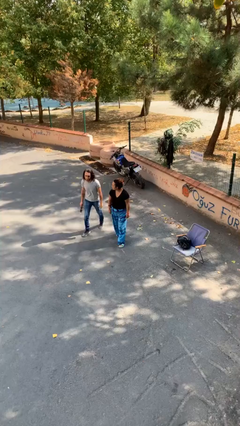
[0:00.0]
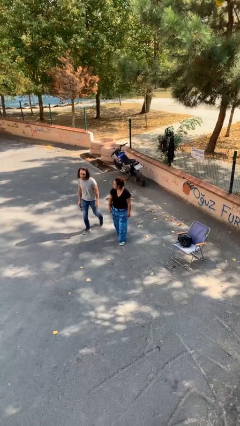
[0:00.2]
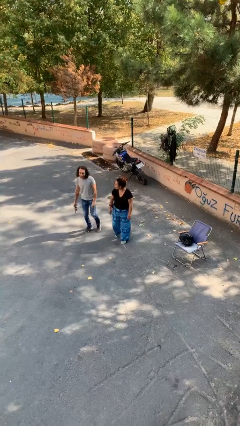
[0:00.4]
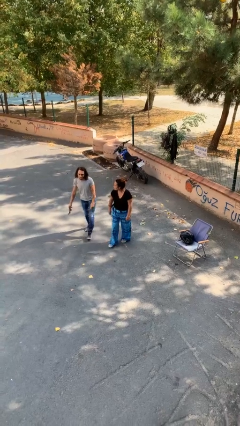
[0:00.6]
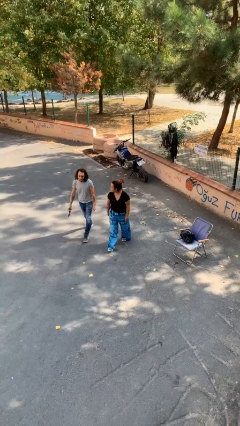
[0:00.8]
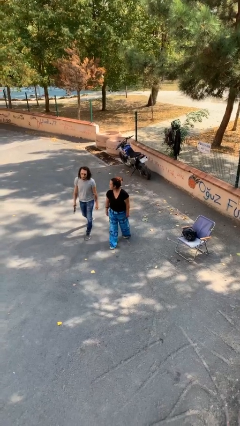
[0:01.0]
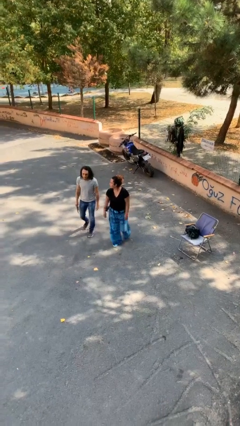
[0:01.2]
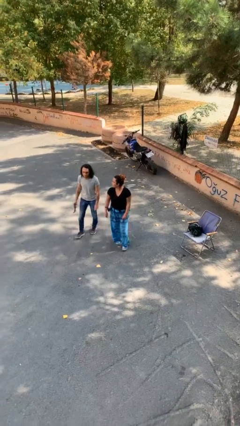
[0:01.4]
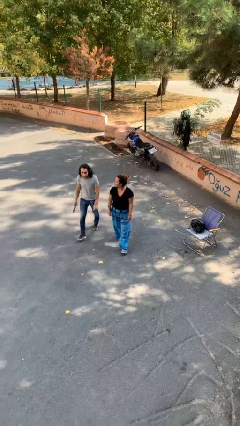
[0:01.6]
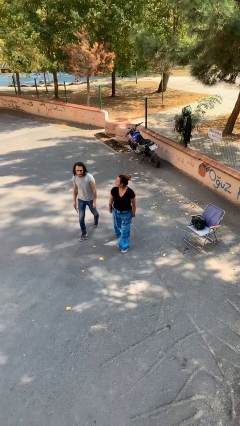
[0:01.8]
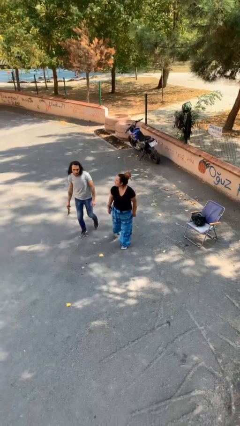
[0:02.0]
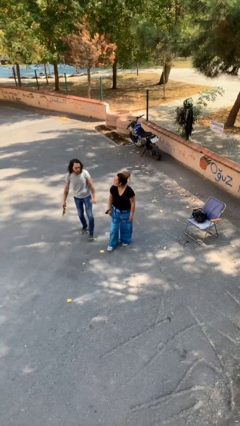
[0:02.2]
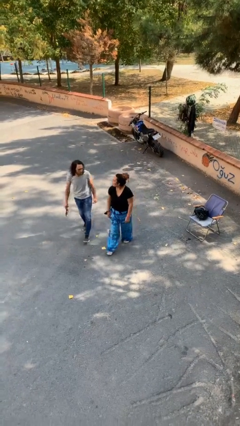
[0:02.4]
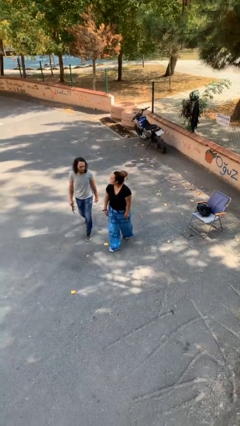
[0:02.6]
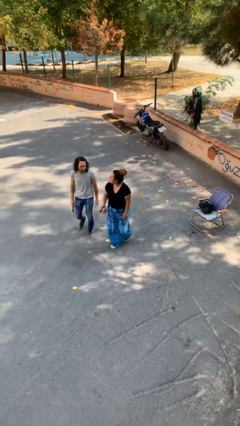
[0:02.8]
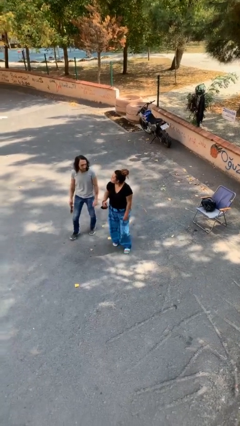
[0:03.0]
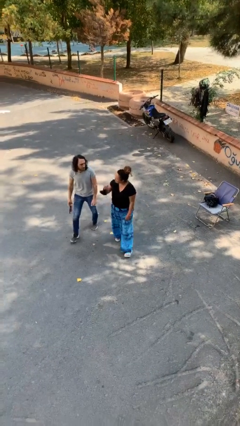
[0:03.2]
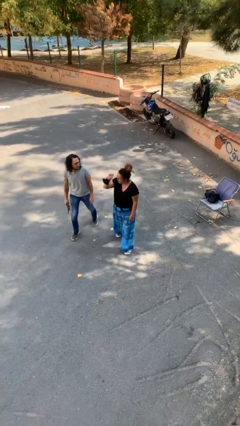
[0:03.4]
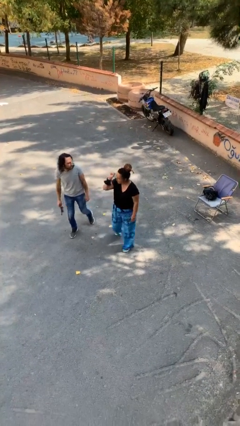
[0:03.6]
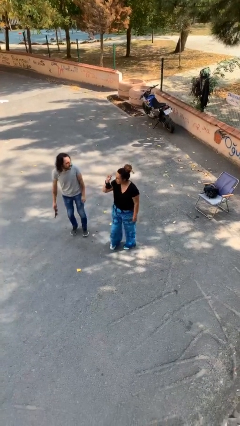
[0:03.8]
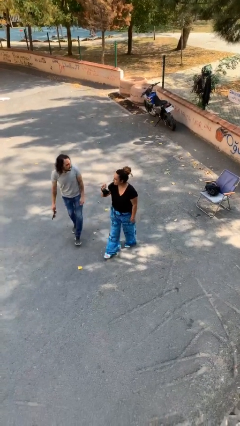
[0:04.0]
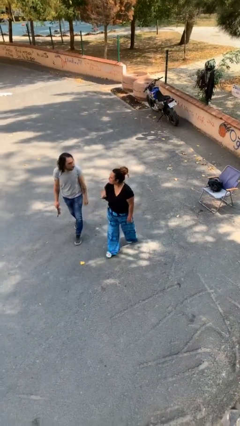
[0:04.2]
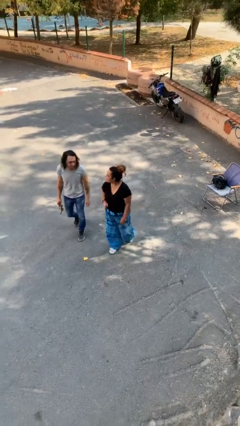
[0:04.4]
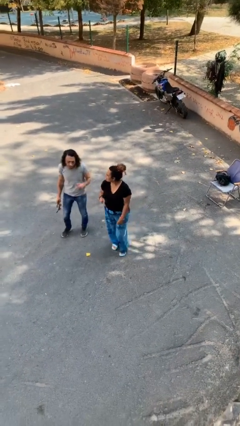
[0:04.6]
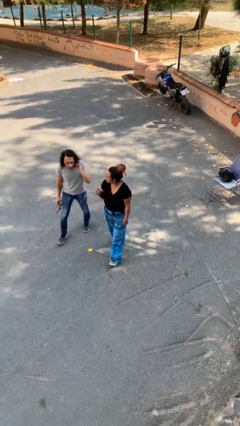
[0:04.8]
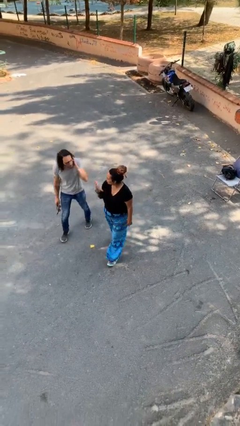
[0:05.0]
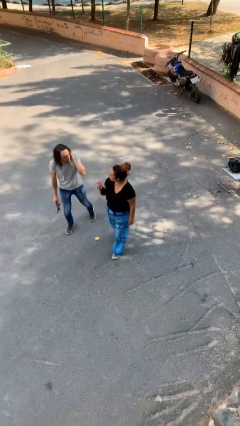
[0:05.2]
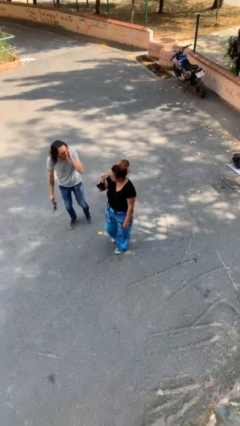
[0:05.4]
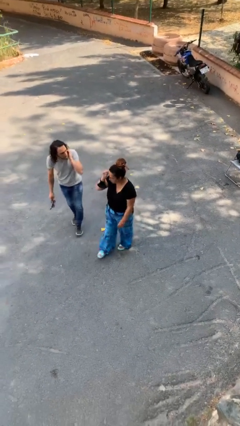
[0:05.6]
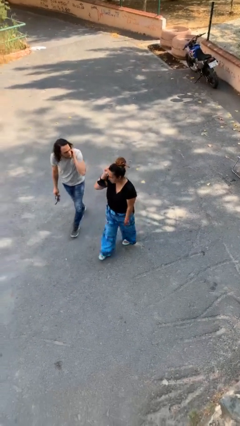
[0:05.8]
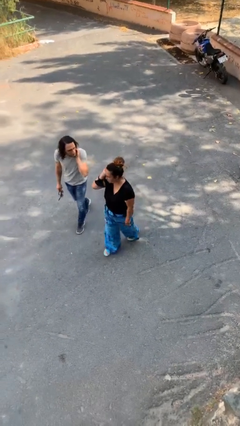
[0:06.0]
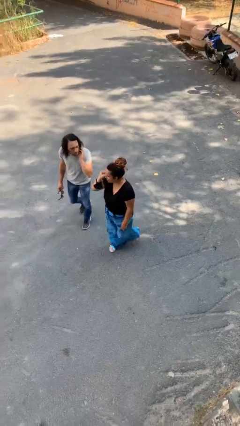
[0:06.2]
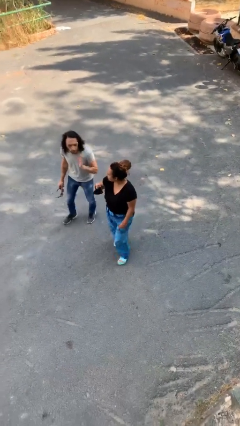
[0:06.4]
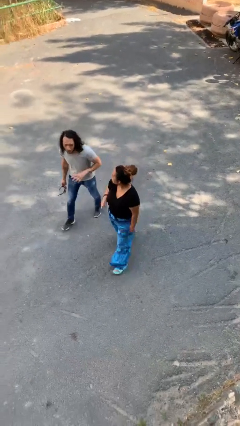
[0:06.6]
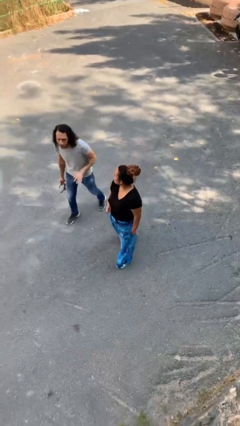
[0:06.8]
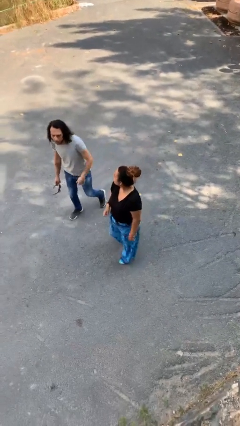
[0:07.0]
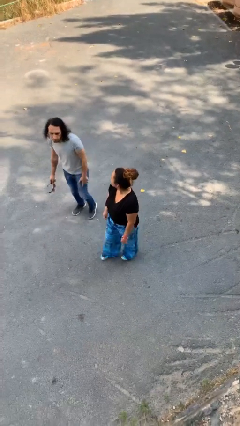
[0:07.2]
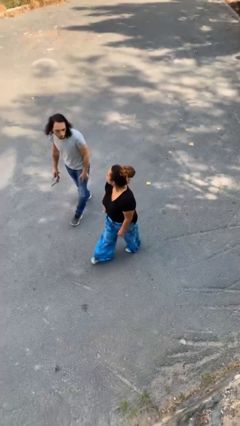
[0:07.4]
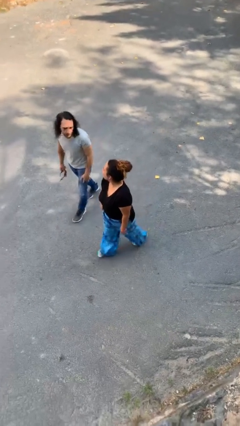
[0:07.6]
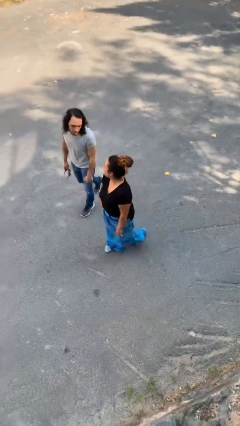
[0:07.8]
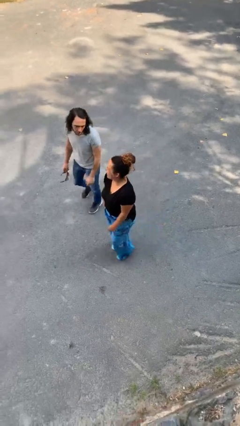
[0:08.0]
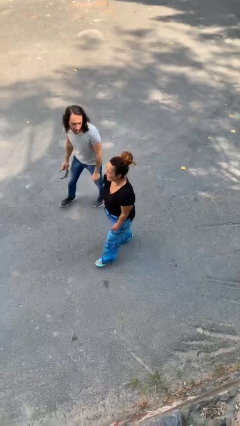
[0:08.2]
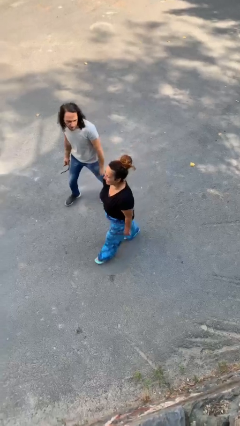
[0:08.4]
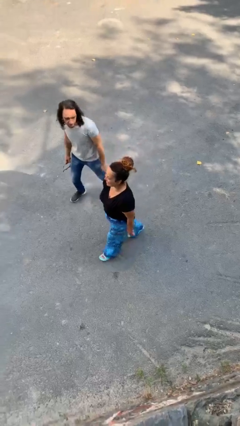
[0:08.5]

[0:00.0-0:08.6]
person talks to person

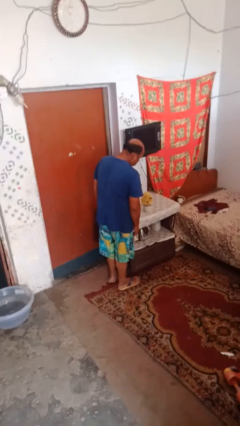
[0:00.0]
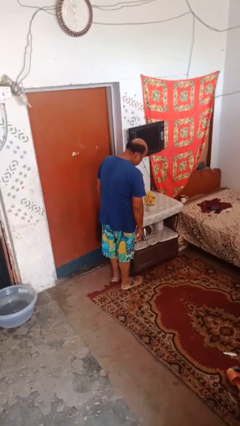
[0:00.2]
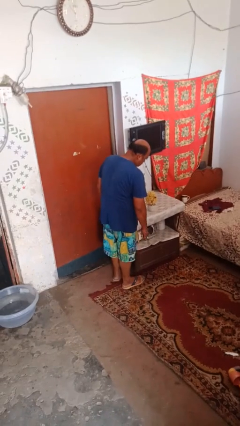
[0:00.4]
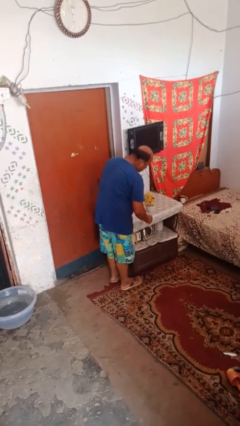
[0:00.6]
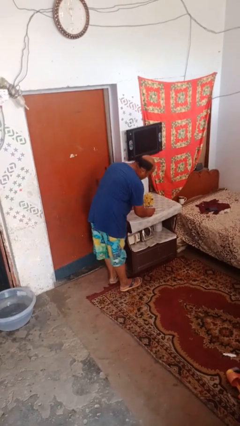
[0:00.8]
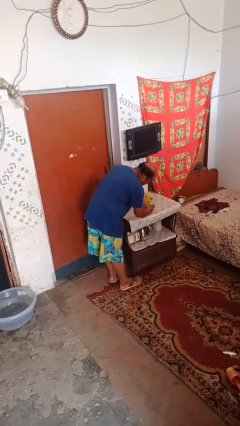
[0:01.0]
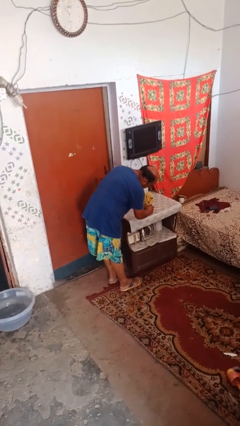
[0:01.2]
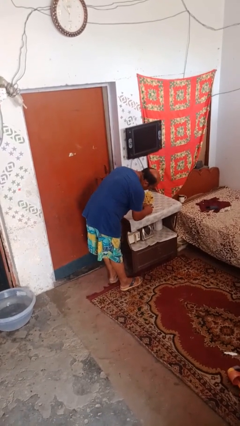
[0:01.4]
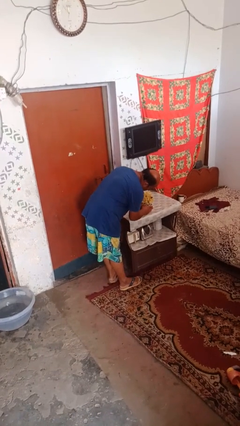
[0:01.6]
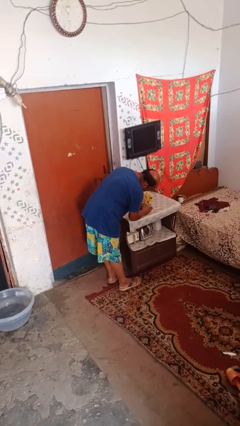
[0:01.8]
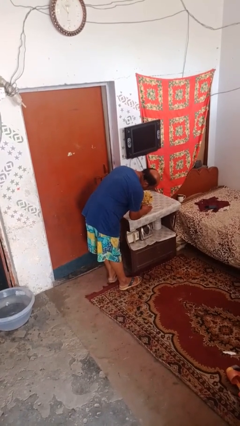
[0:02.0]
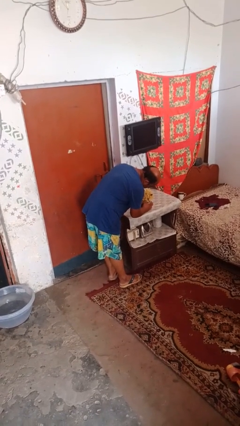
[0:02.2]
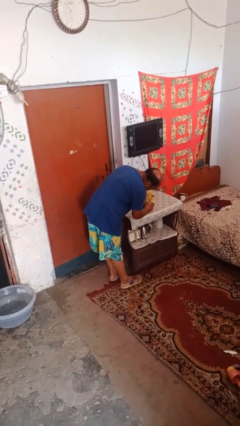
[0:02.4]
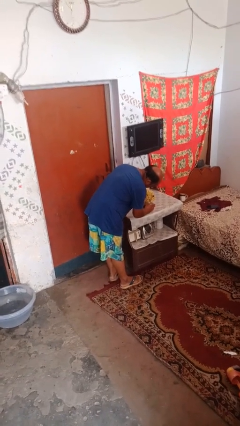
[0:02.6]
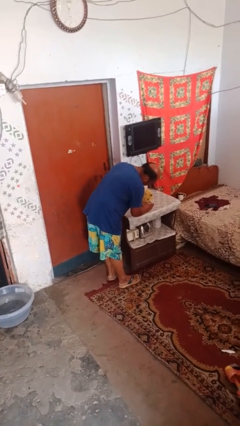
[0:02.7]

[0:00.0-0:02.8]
person arranges flowers in vase

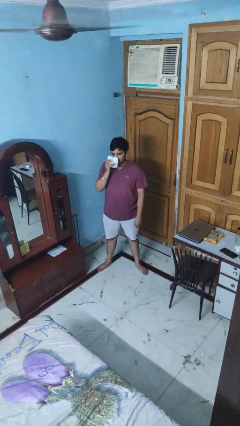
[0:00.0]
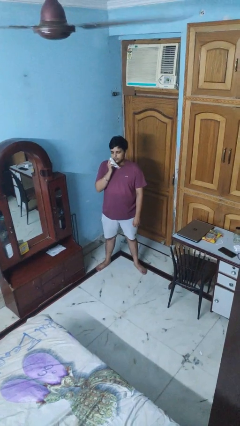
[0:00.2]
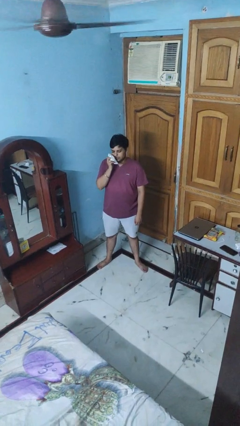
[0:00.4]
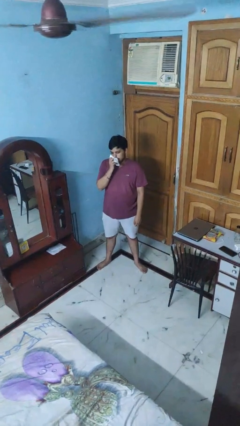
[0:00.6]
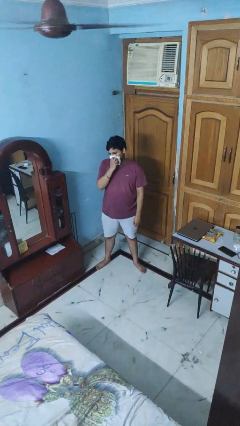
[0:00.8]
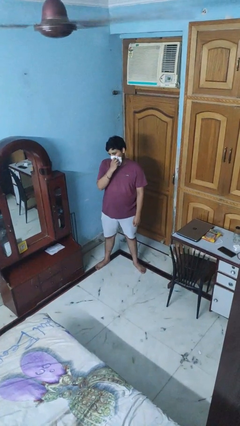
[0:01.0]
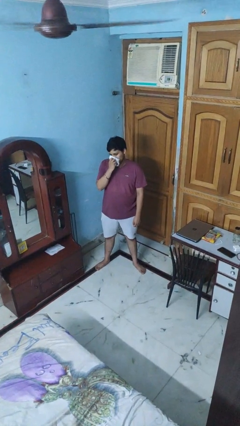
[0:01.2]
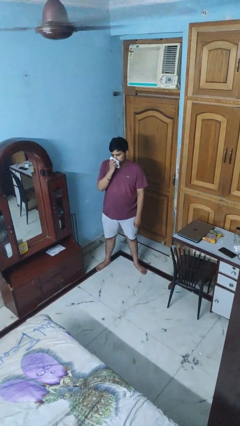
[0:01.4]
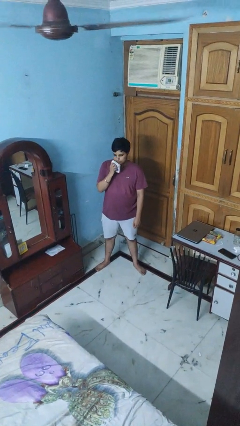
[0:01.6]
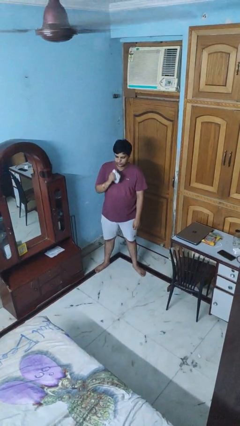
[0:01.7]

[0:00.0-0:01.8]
person wipes mouth with napkin

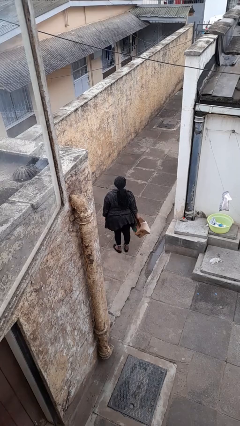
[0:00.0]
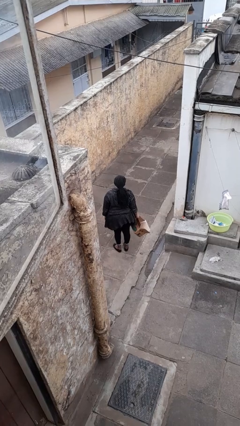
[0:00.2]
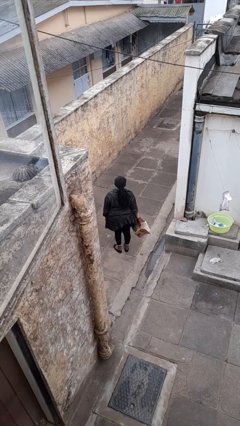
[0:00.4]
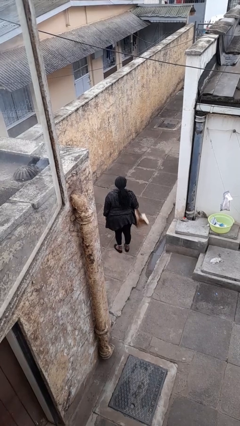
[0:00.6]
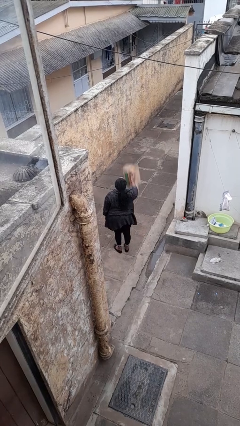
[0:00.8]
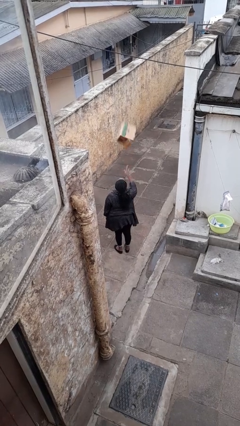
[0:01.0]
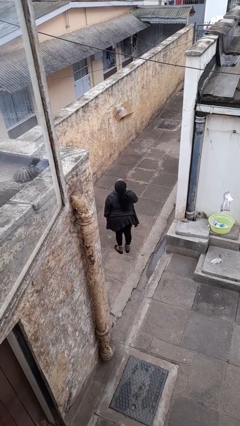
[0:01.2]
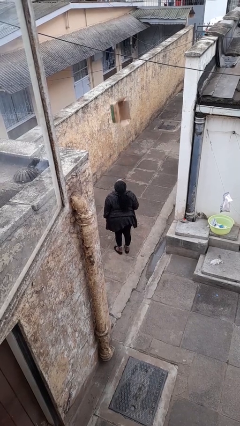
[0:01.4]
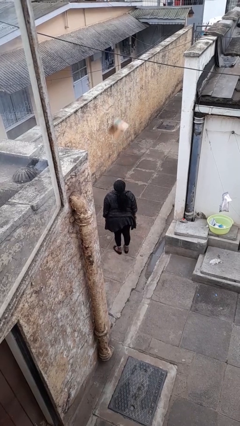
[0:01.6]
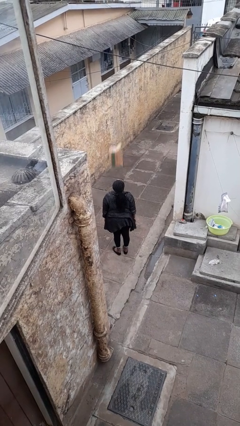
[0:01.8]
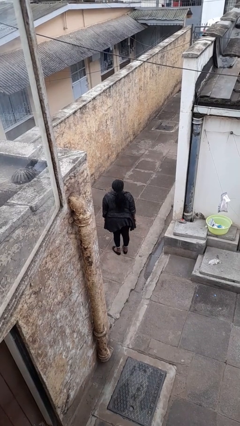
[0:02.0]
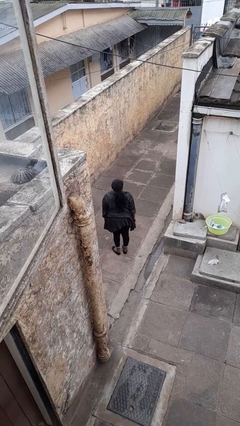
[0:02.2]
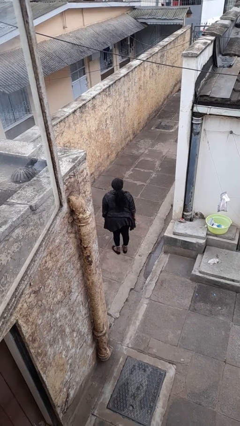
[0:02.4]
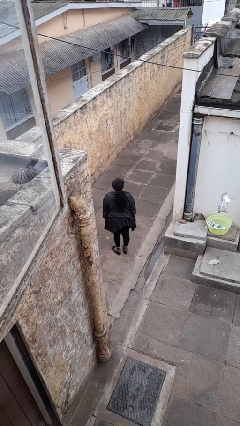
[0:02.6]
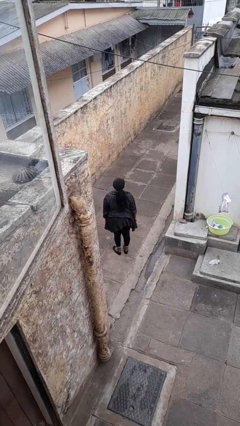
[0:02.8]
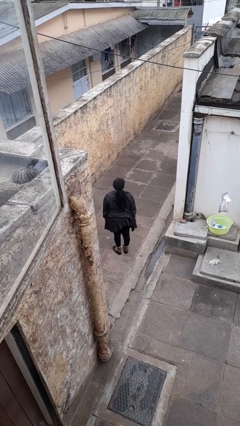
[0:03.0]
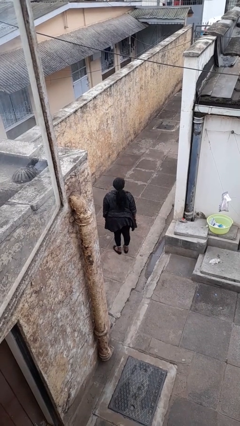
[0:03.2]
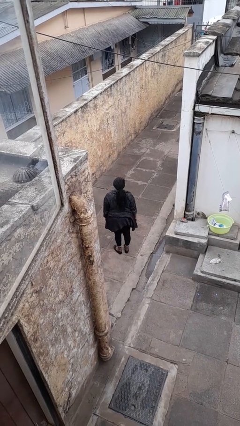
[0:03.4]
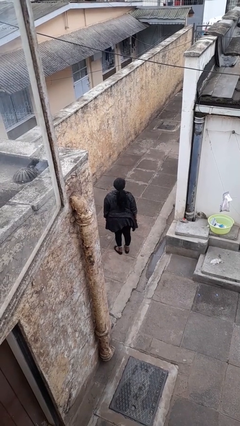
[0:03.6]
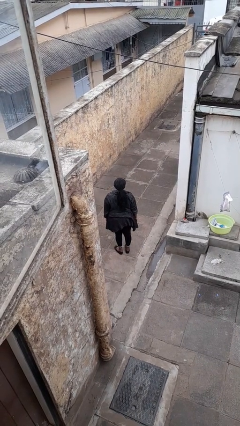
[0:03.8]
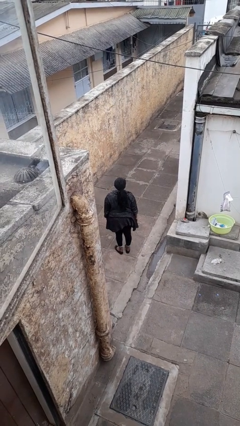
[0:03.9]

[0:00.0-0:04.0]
person throws object into air

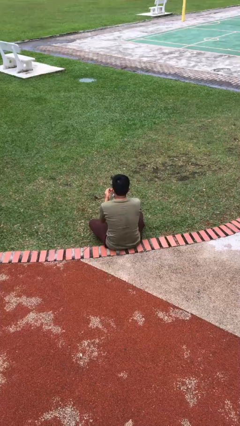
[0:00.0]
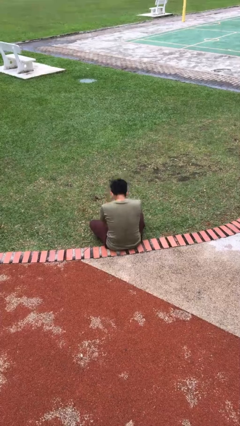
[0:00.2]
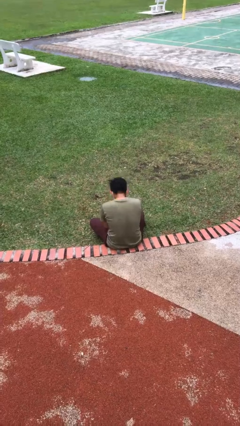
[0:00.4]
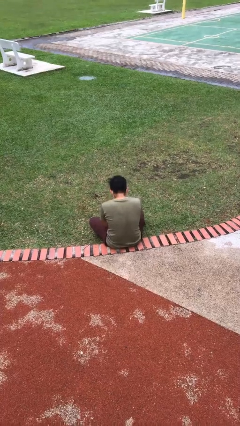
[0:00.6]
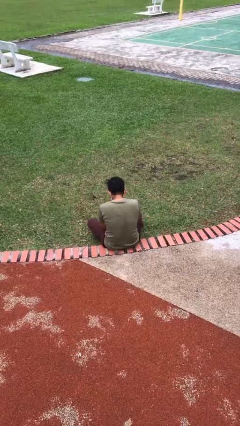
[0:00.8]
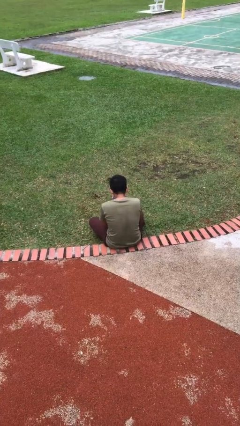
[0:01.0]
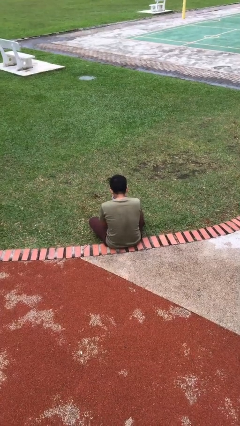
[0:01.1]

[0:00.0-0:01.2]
person sneezes into hand
